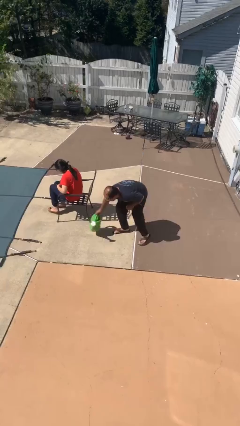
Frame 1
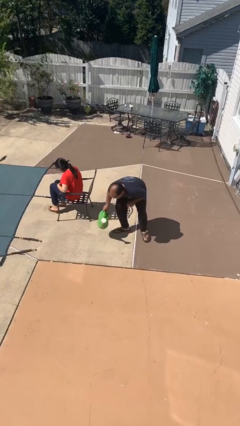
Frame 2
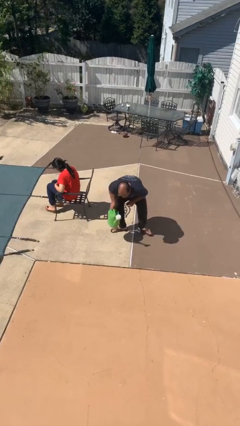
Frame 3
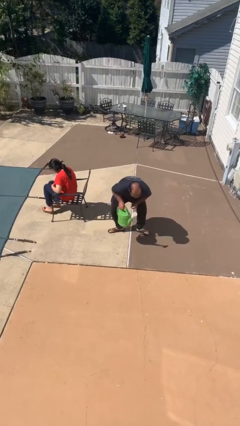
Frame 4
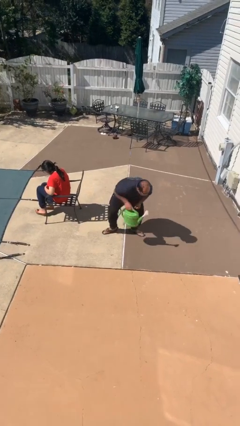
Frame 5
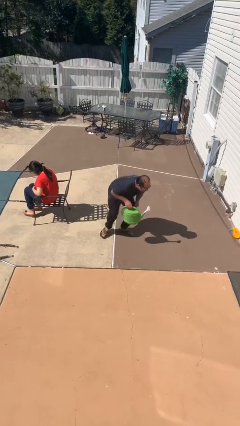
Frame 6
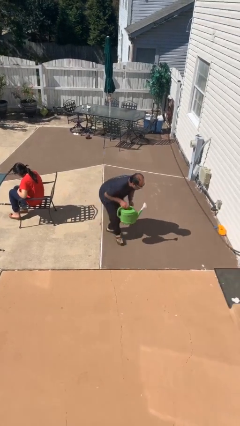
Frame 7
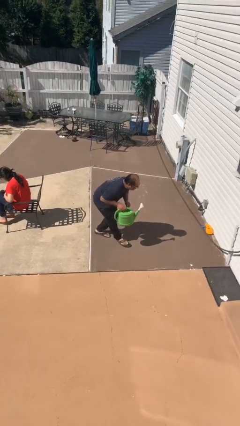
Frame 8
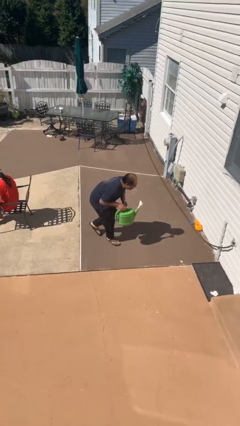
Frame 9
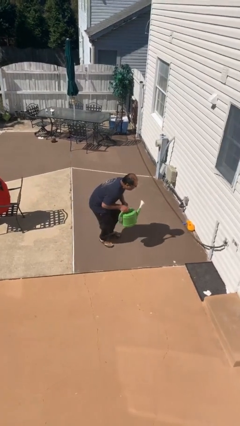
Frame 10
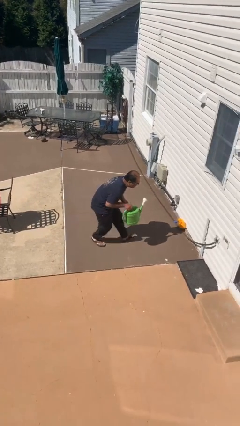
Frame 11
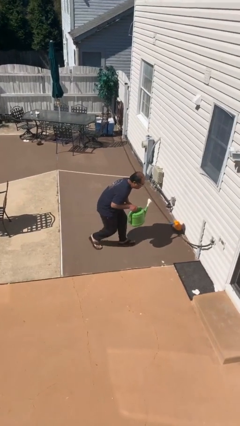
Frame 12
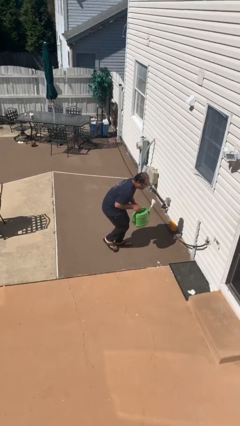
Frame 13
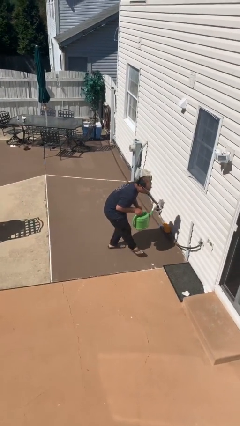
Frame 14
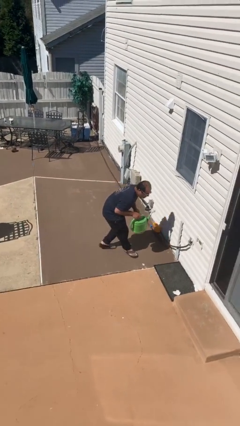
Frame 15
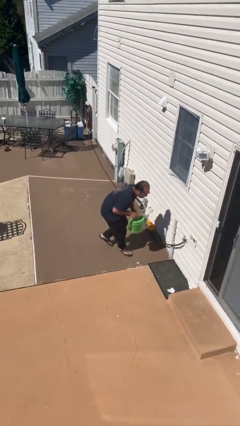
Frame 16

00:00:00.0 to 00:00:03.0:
person steals object from person

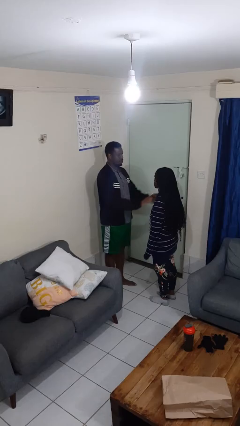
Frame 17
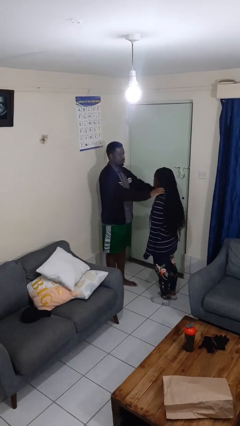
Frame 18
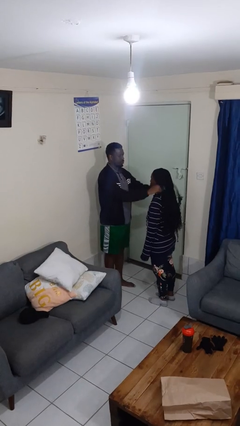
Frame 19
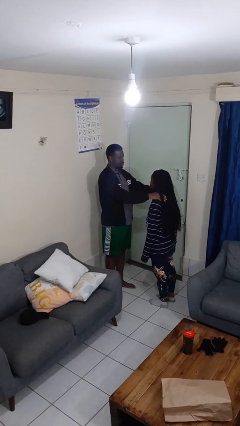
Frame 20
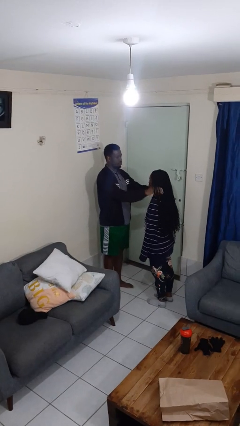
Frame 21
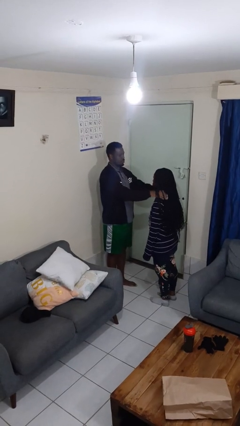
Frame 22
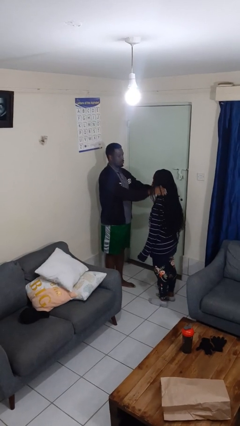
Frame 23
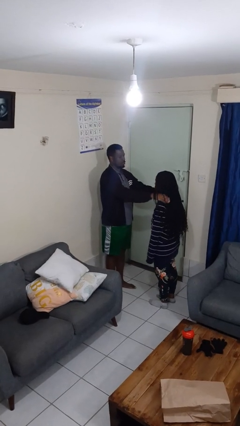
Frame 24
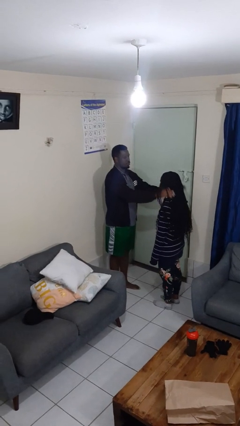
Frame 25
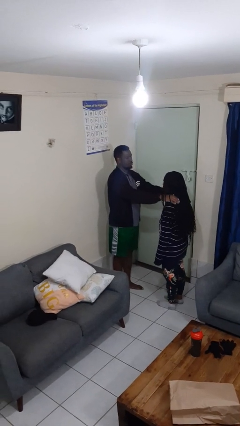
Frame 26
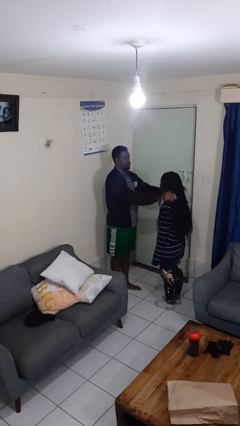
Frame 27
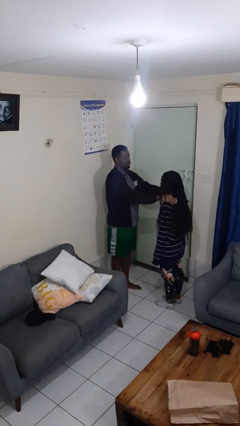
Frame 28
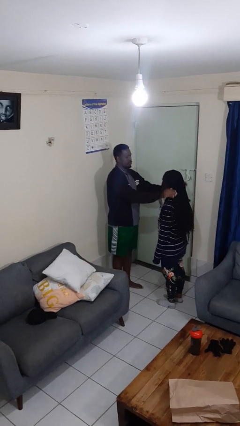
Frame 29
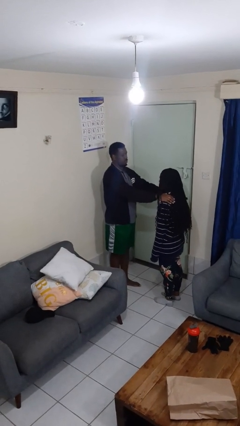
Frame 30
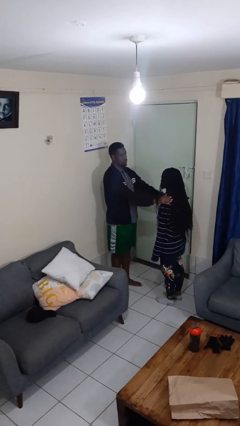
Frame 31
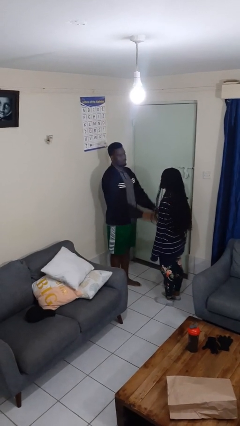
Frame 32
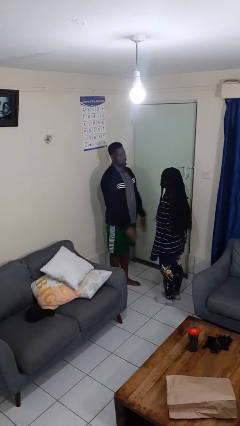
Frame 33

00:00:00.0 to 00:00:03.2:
person pounds shoulders of person

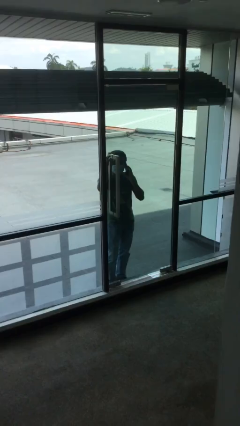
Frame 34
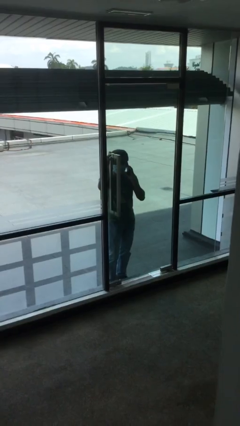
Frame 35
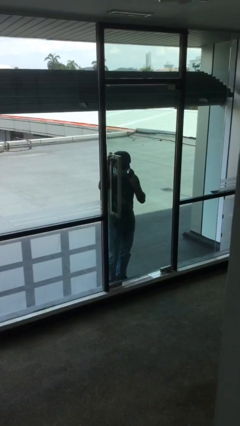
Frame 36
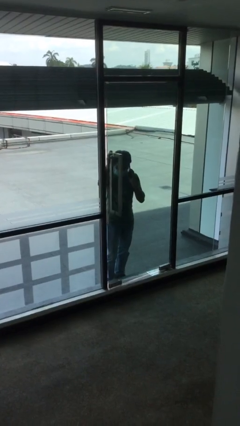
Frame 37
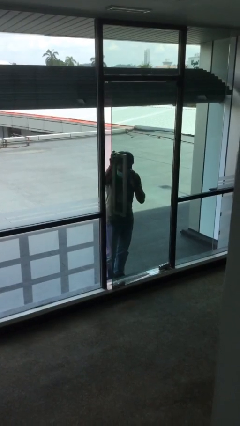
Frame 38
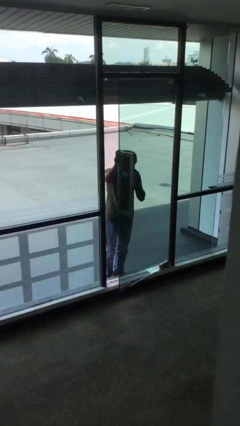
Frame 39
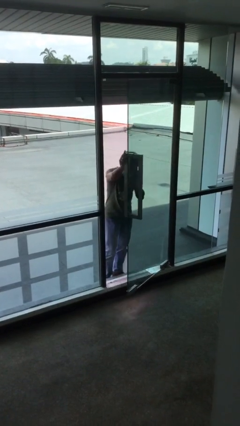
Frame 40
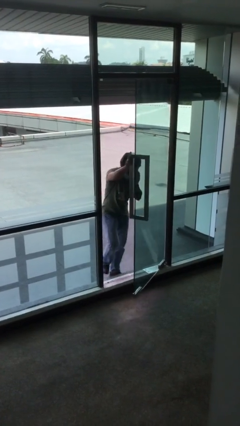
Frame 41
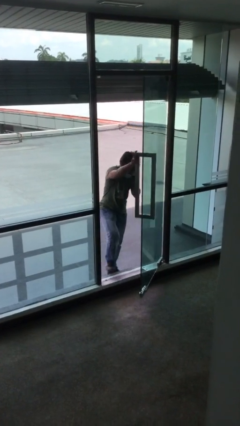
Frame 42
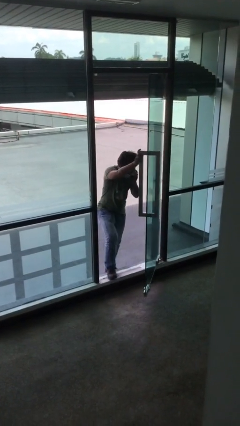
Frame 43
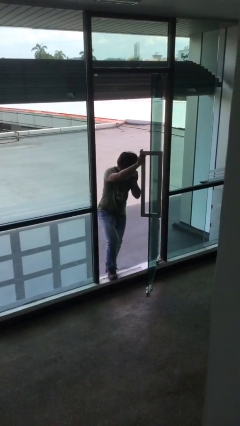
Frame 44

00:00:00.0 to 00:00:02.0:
person opens facility door

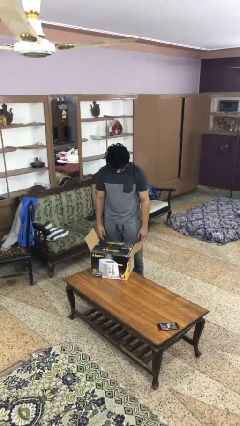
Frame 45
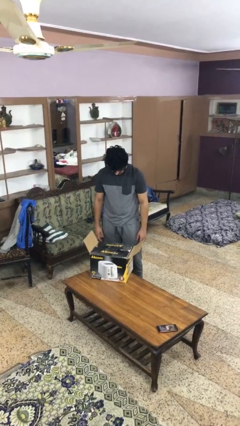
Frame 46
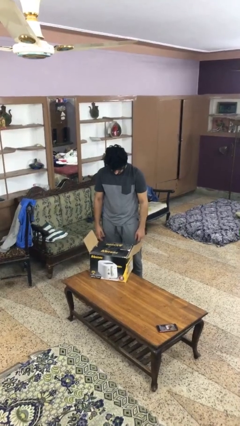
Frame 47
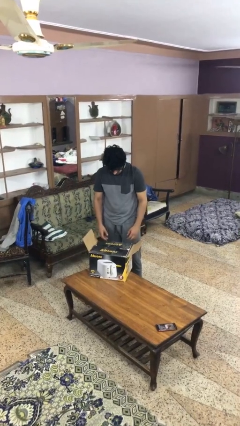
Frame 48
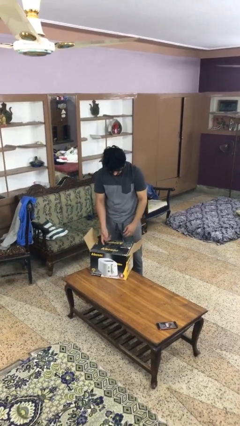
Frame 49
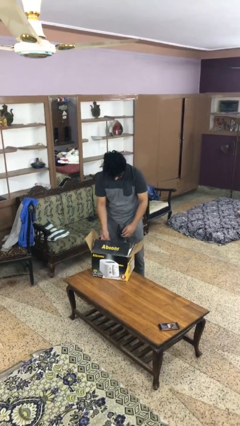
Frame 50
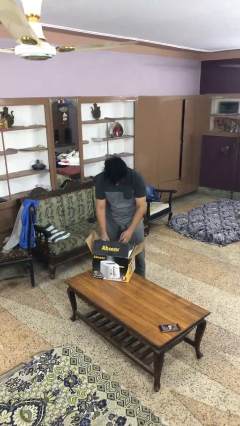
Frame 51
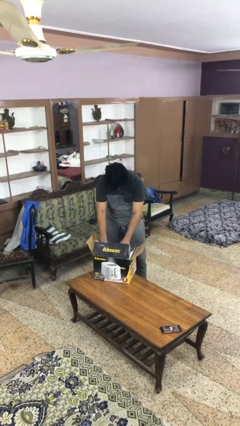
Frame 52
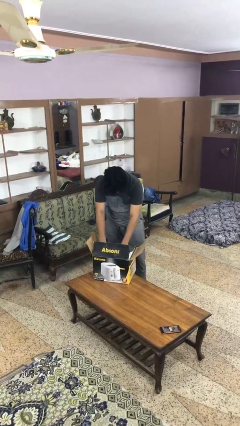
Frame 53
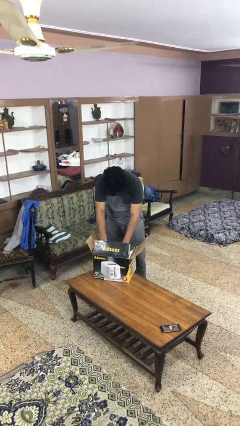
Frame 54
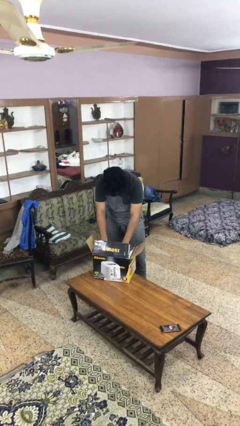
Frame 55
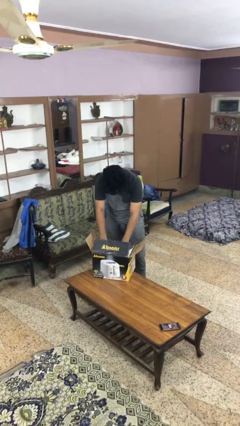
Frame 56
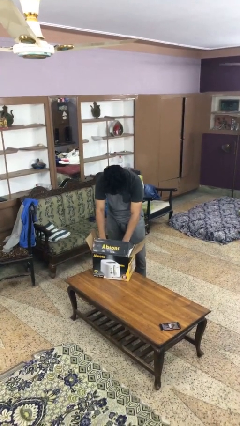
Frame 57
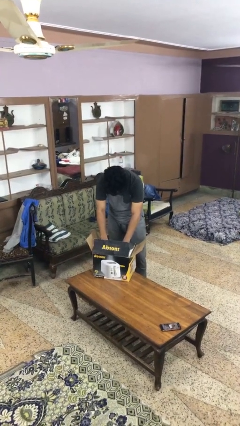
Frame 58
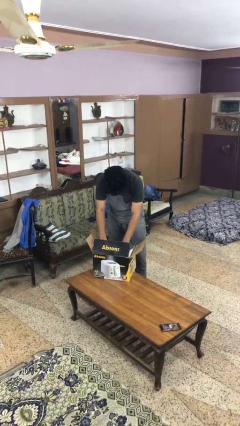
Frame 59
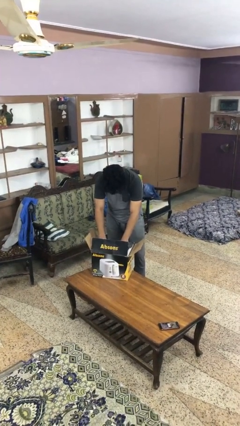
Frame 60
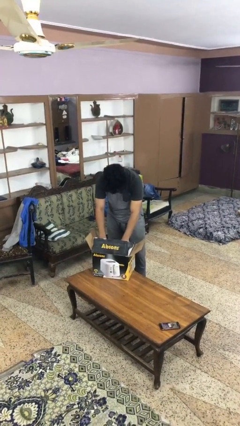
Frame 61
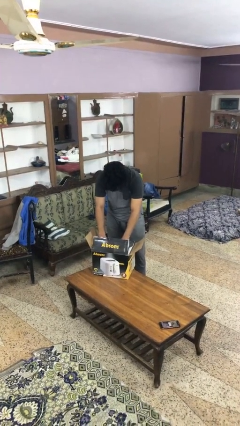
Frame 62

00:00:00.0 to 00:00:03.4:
person searches in box

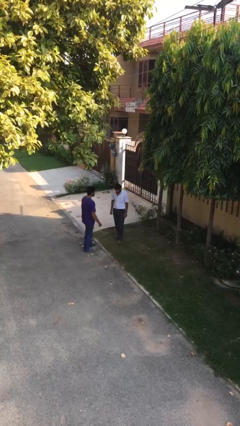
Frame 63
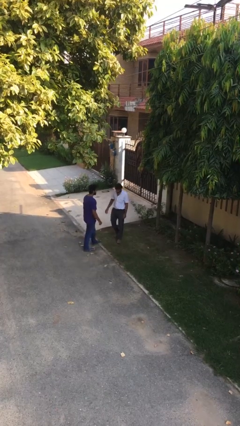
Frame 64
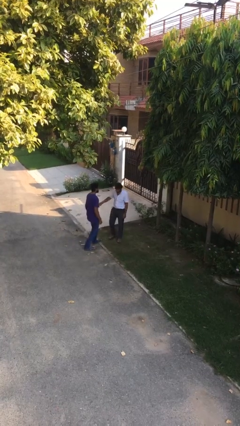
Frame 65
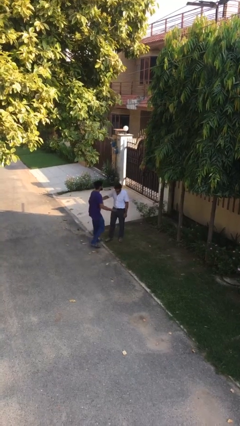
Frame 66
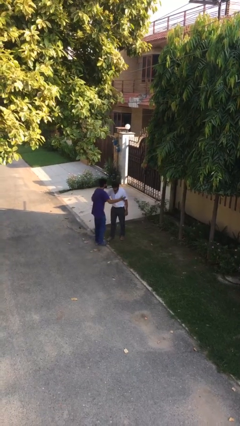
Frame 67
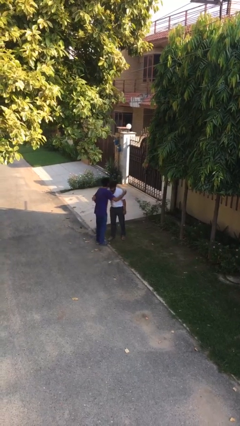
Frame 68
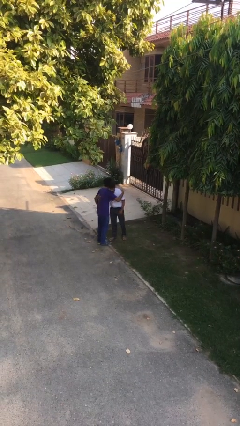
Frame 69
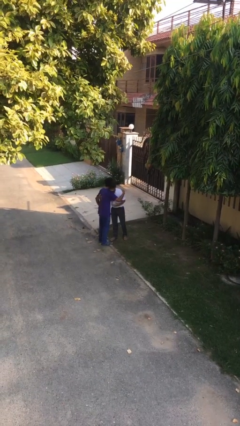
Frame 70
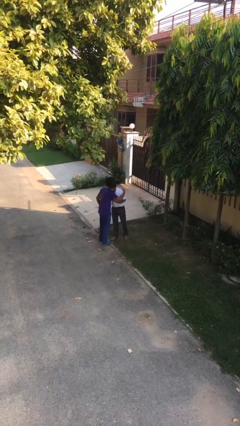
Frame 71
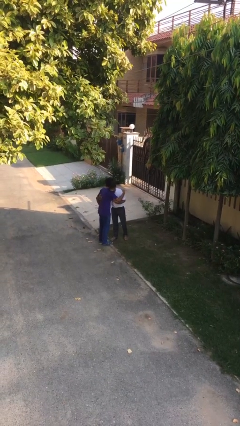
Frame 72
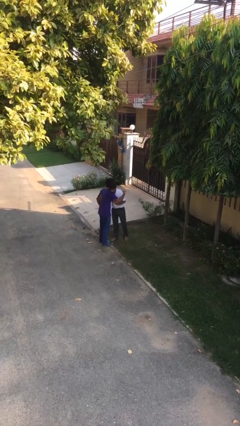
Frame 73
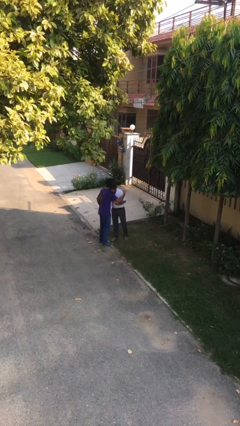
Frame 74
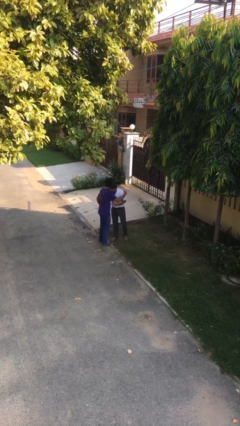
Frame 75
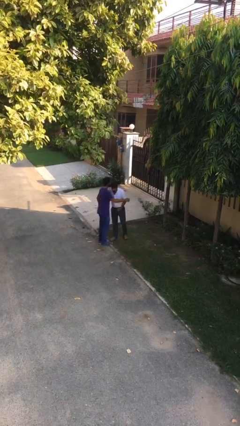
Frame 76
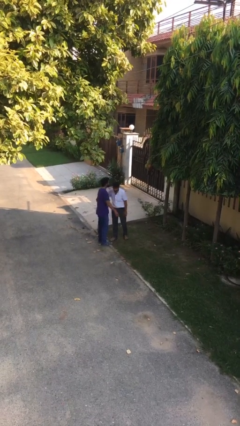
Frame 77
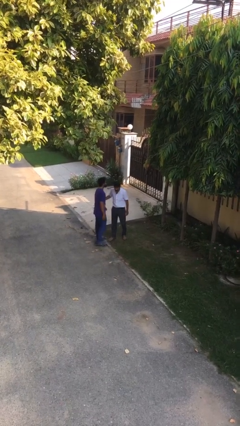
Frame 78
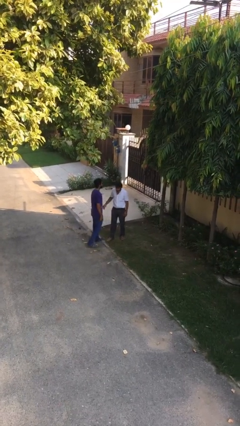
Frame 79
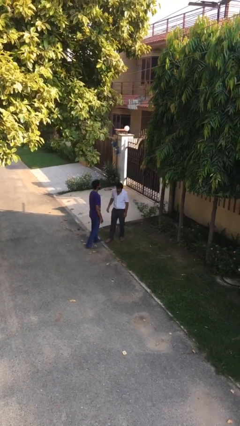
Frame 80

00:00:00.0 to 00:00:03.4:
person embraces person

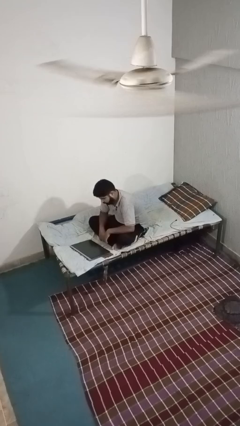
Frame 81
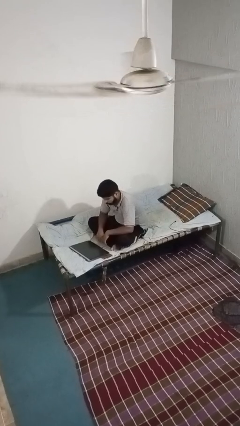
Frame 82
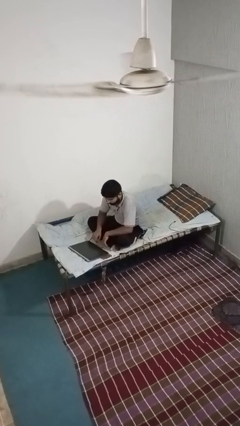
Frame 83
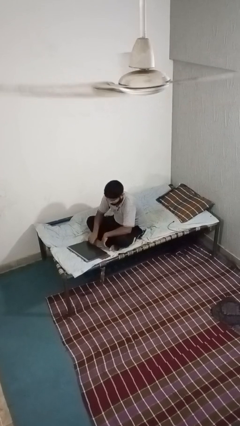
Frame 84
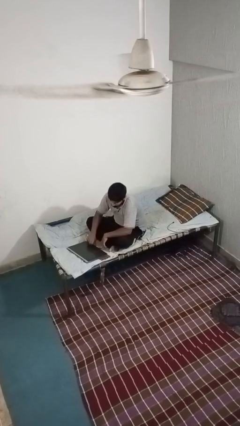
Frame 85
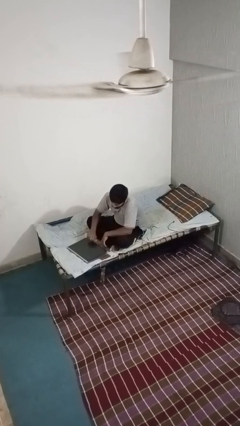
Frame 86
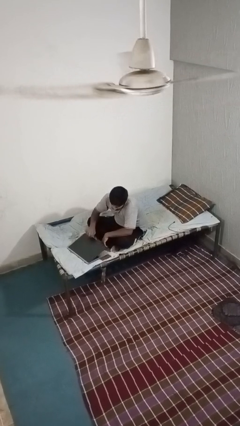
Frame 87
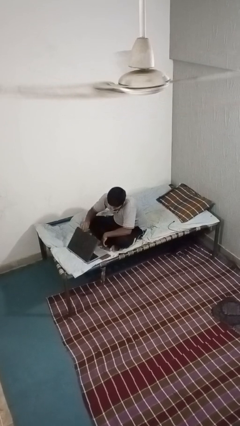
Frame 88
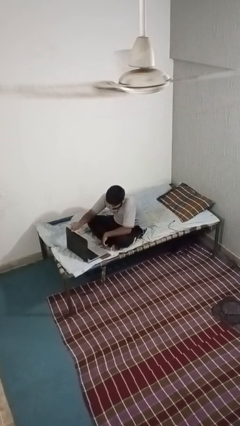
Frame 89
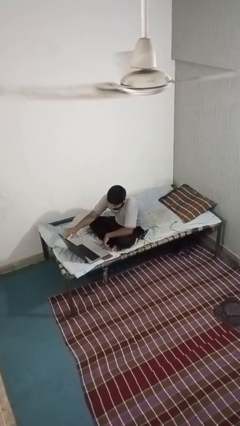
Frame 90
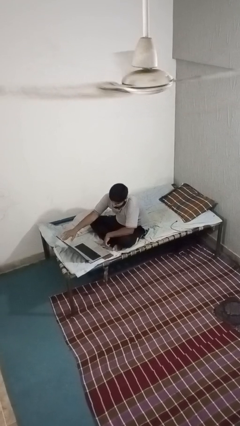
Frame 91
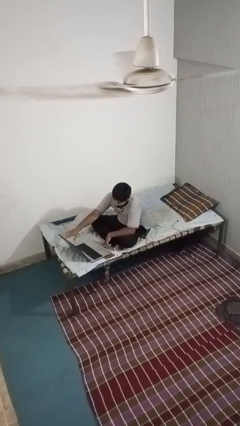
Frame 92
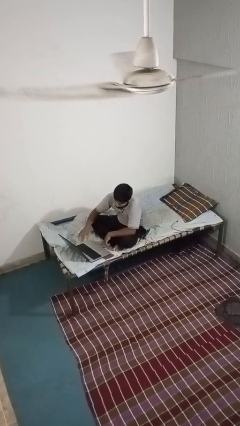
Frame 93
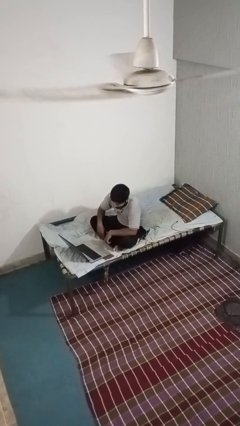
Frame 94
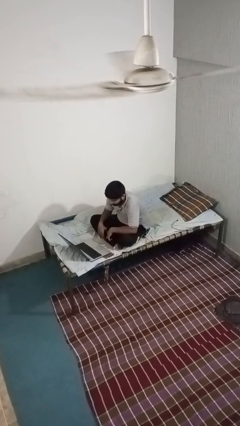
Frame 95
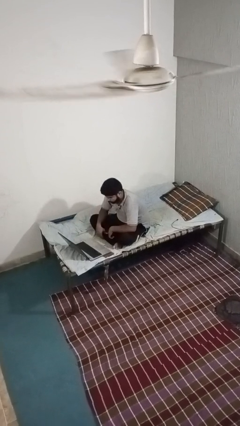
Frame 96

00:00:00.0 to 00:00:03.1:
person opens laptop
